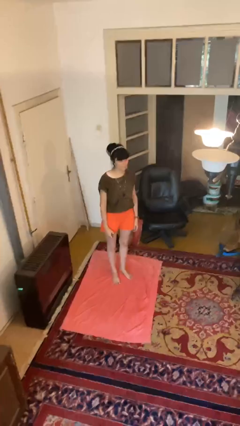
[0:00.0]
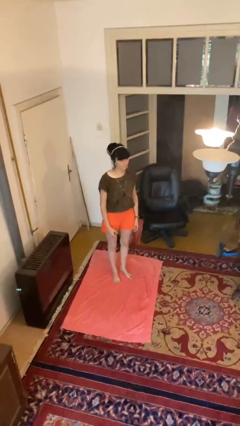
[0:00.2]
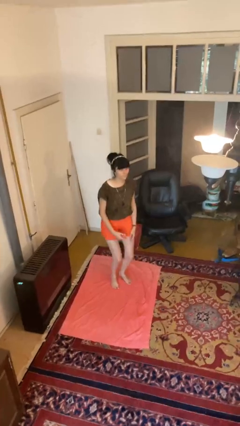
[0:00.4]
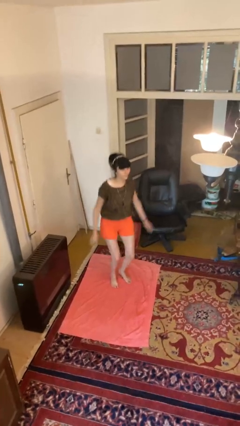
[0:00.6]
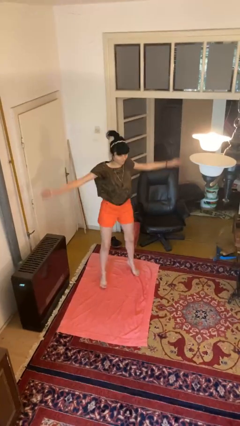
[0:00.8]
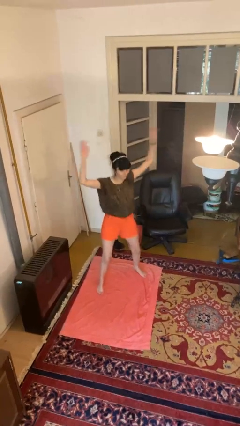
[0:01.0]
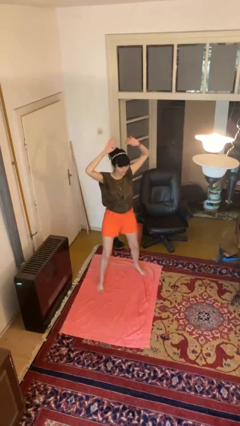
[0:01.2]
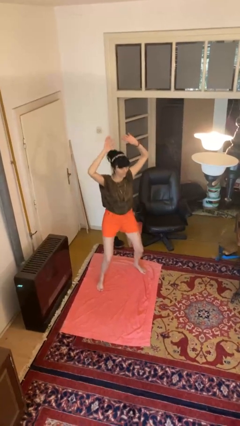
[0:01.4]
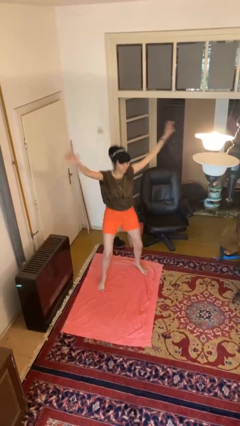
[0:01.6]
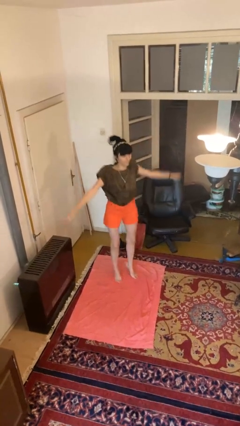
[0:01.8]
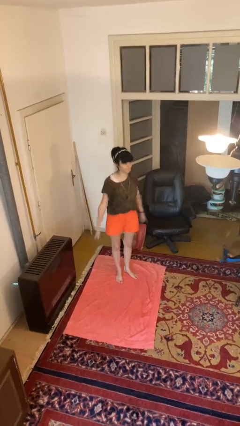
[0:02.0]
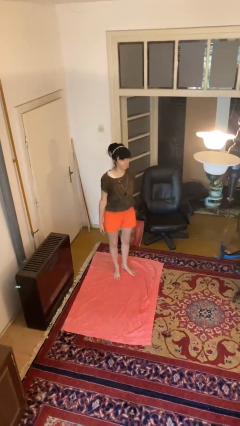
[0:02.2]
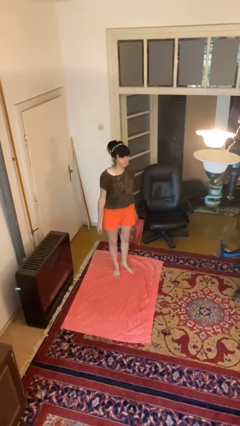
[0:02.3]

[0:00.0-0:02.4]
person exercises with jumping jacks

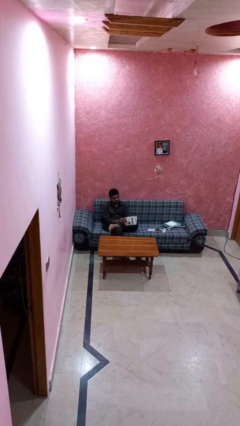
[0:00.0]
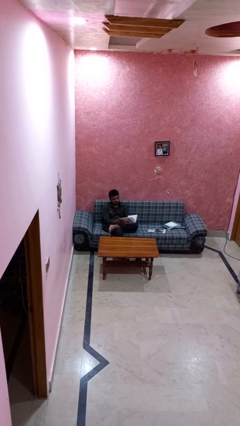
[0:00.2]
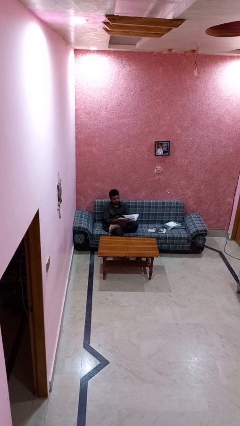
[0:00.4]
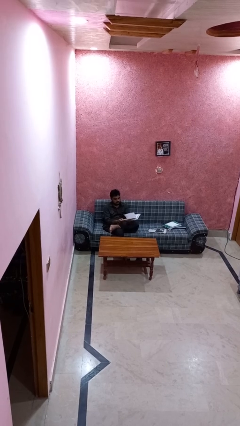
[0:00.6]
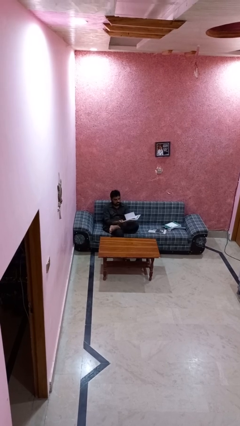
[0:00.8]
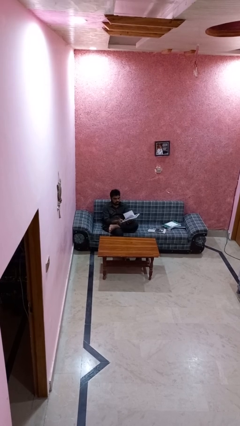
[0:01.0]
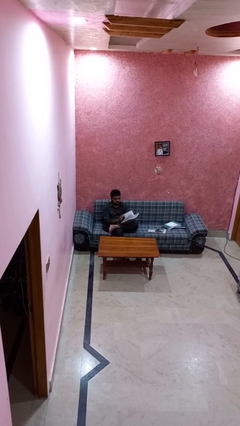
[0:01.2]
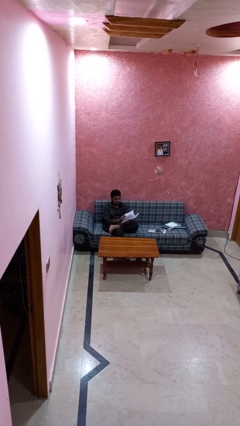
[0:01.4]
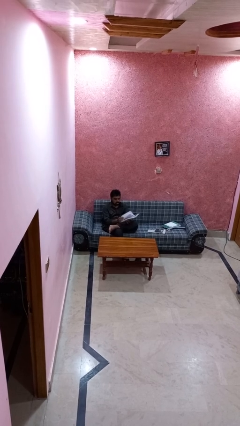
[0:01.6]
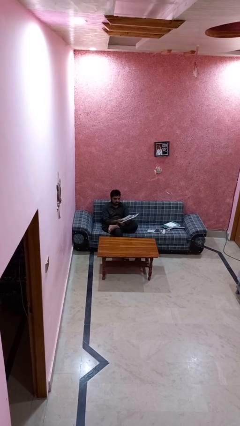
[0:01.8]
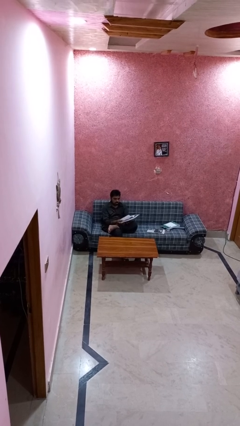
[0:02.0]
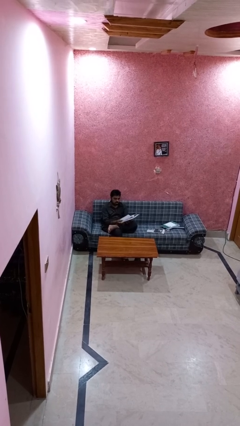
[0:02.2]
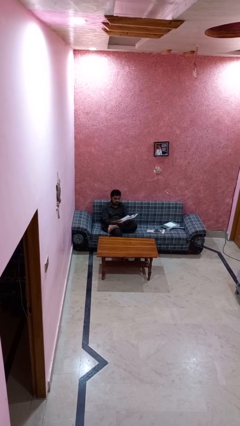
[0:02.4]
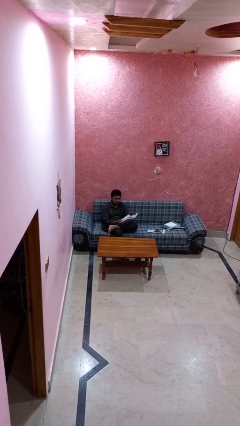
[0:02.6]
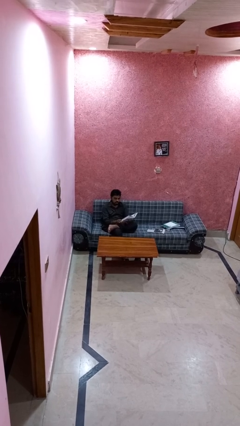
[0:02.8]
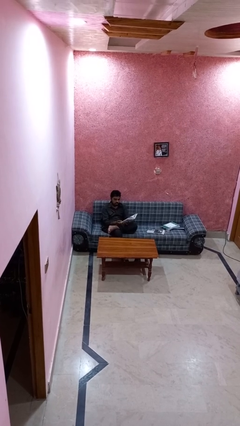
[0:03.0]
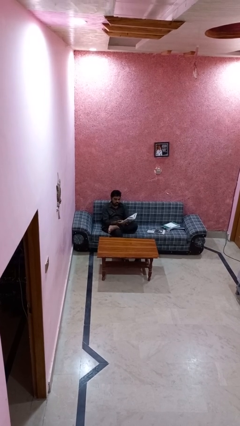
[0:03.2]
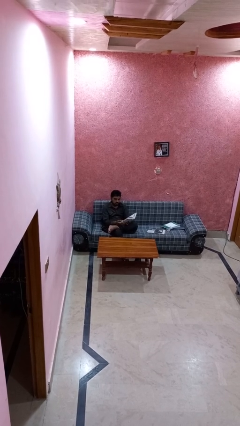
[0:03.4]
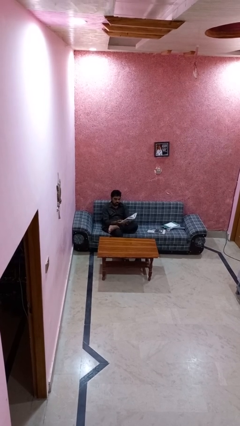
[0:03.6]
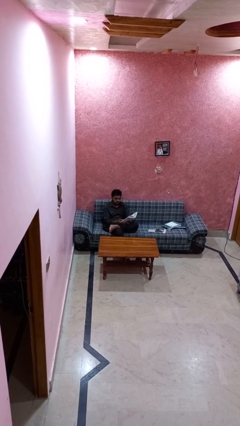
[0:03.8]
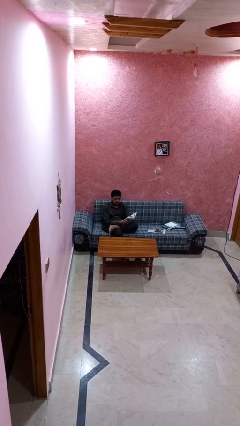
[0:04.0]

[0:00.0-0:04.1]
person reads book

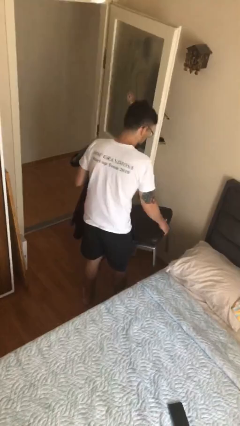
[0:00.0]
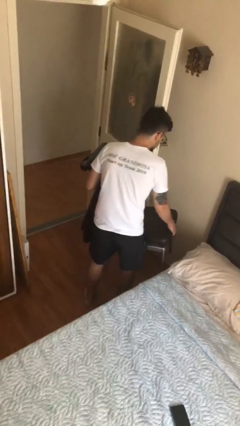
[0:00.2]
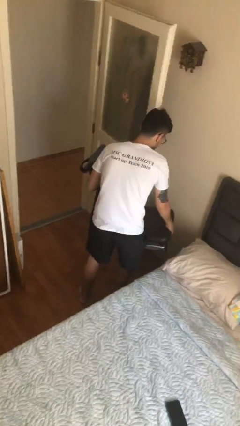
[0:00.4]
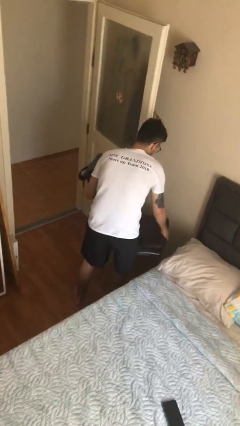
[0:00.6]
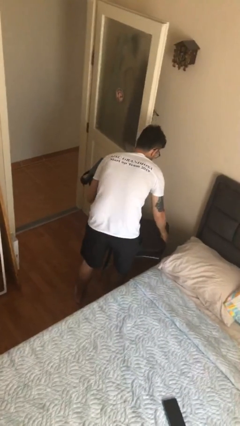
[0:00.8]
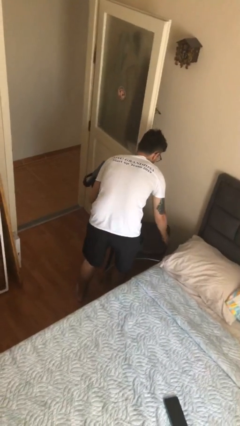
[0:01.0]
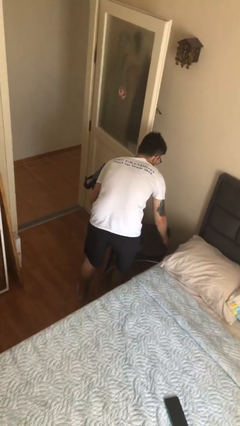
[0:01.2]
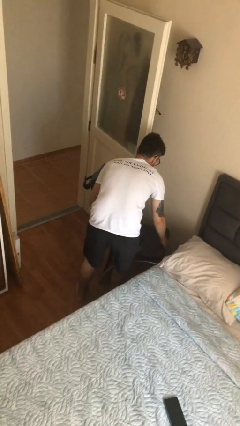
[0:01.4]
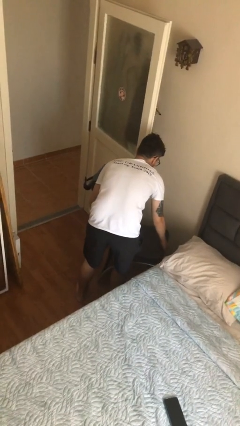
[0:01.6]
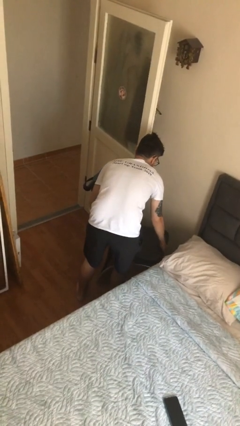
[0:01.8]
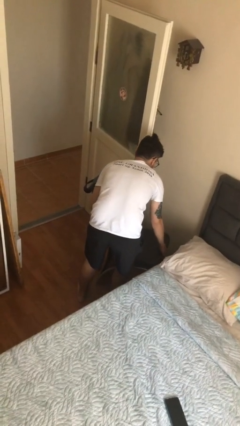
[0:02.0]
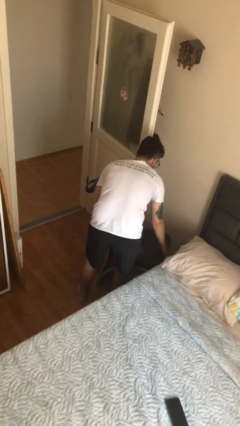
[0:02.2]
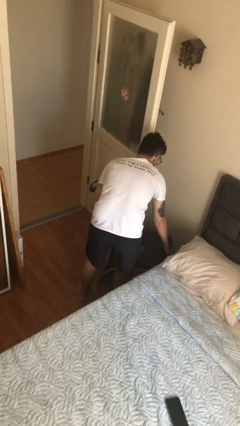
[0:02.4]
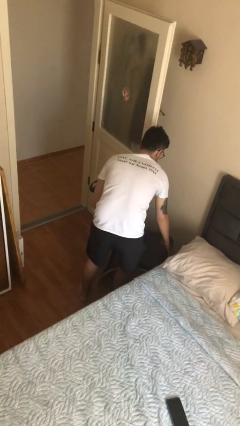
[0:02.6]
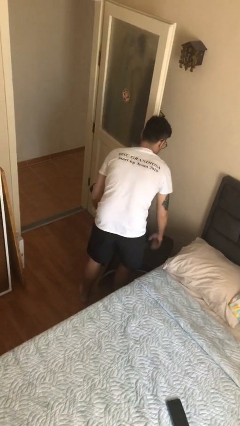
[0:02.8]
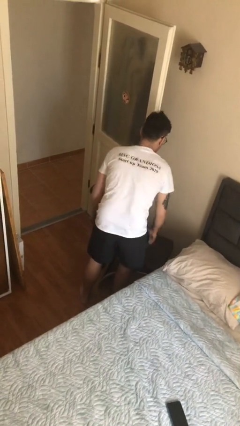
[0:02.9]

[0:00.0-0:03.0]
person puts down object on floor

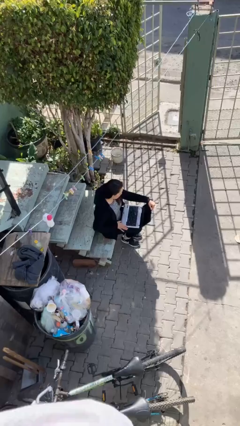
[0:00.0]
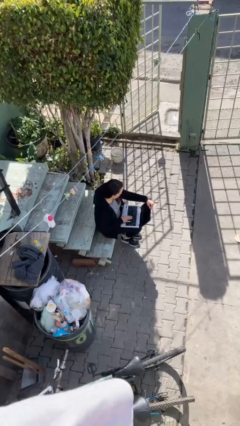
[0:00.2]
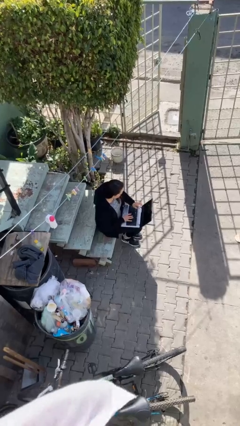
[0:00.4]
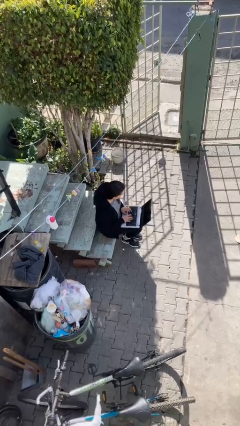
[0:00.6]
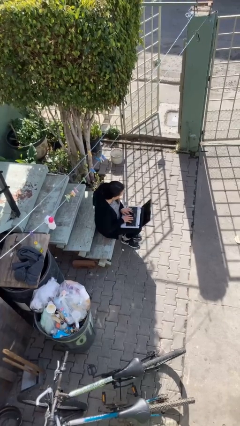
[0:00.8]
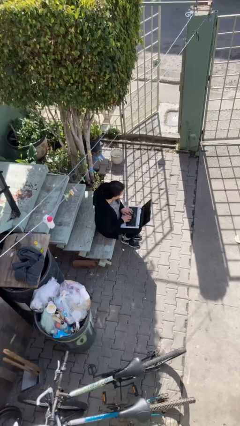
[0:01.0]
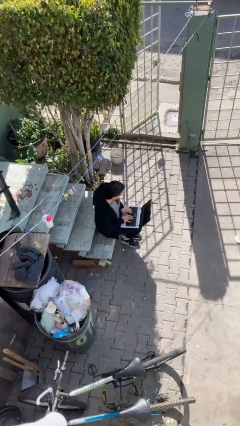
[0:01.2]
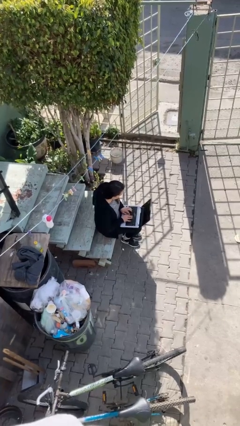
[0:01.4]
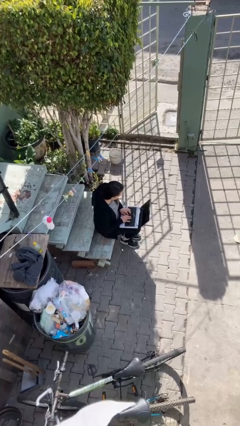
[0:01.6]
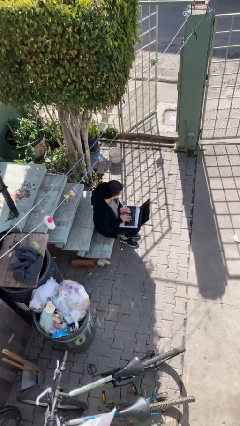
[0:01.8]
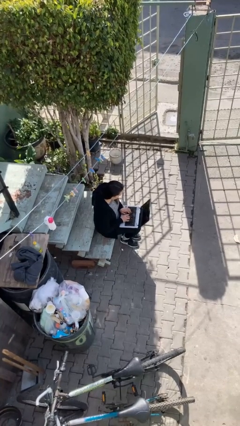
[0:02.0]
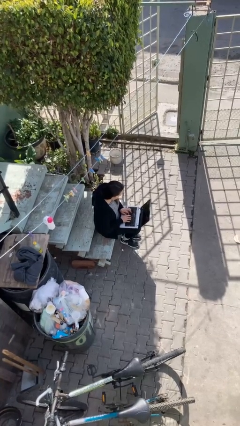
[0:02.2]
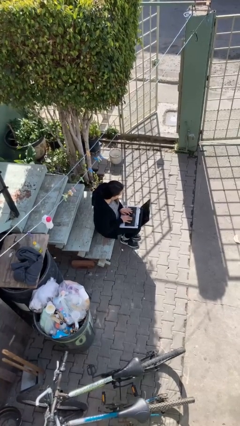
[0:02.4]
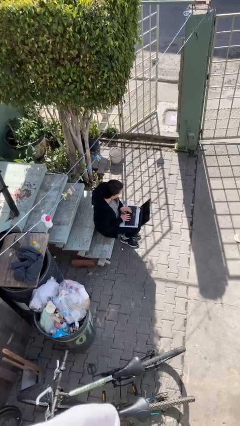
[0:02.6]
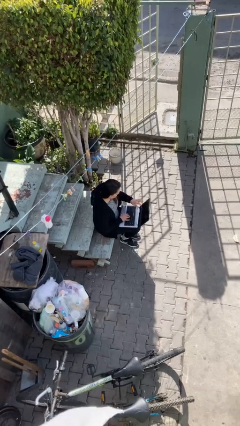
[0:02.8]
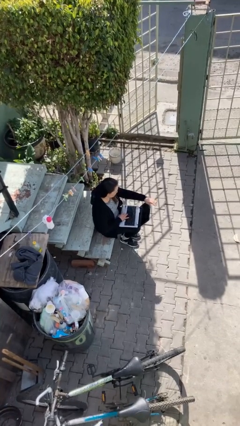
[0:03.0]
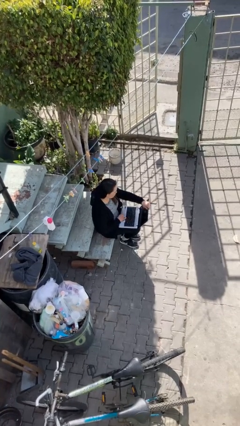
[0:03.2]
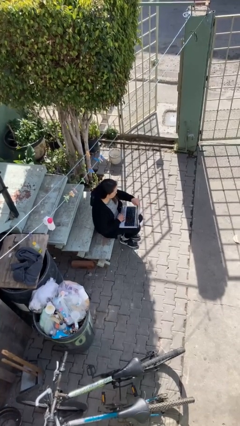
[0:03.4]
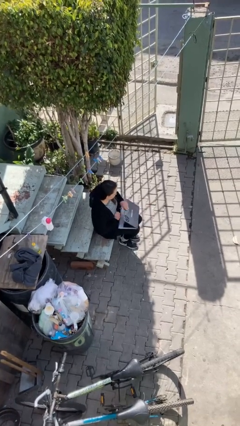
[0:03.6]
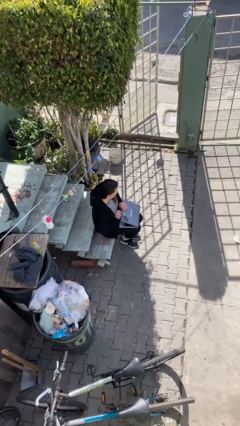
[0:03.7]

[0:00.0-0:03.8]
person interacts with laptop

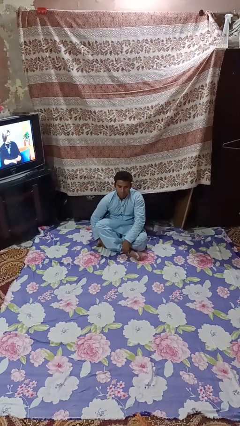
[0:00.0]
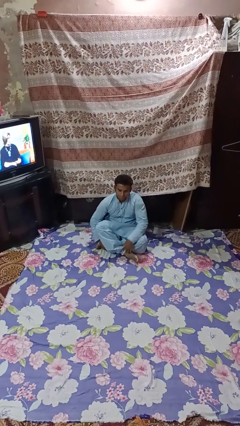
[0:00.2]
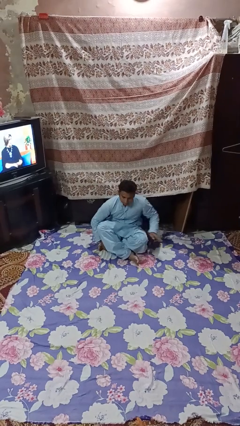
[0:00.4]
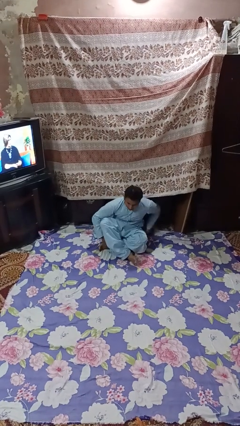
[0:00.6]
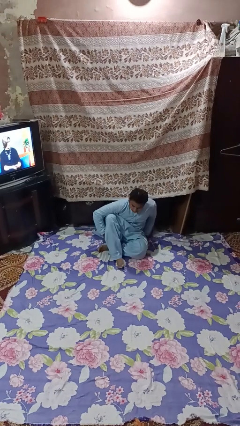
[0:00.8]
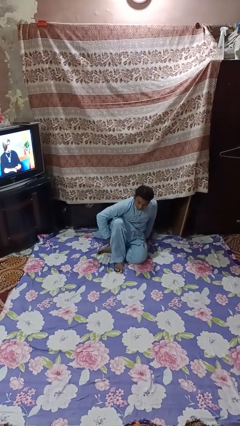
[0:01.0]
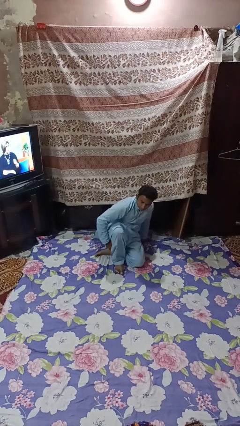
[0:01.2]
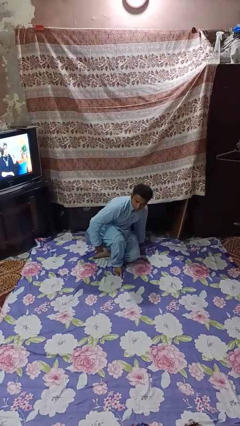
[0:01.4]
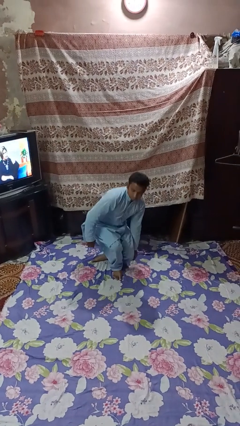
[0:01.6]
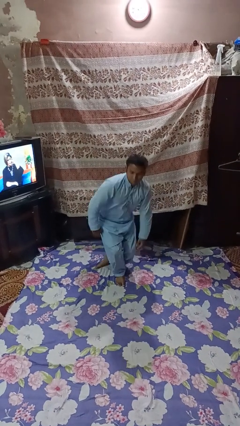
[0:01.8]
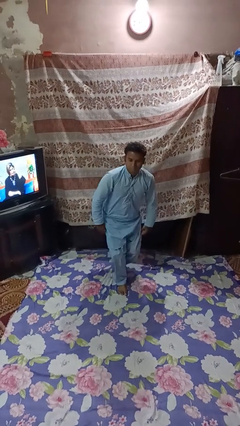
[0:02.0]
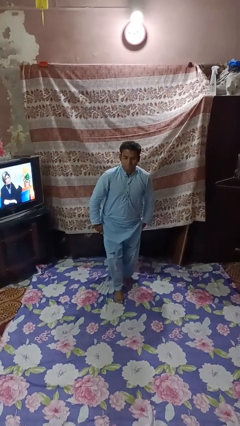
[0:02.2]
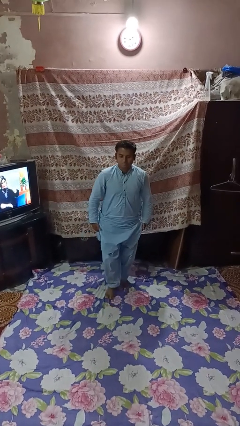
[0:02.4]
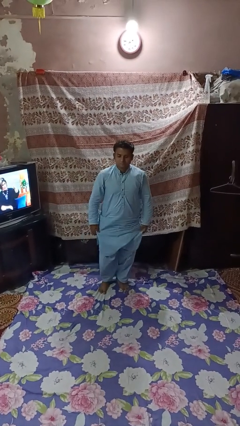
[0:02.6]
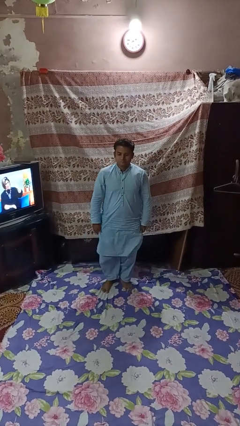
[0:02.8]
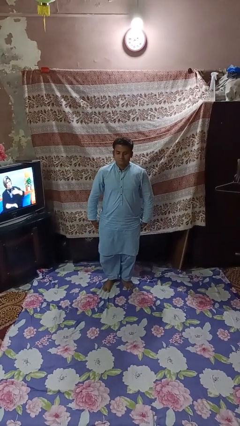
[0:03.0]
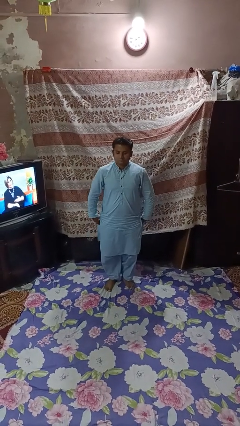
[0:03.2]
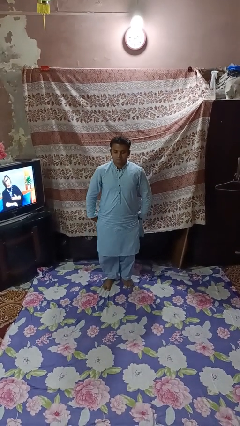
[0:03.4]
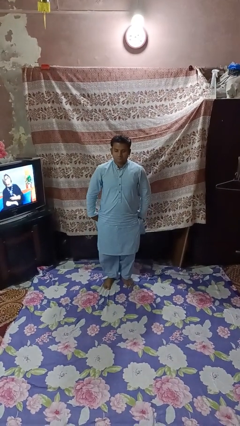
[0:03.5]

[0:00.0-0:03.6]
person stands up from floor

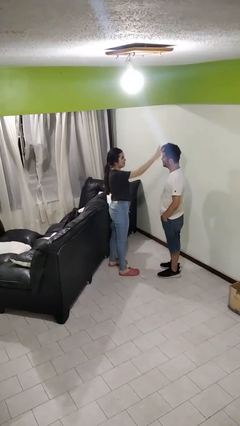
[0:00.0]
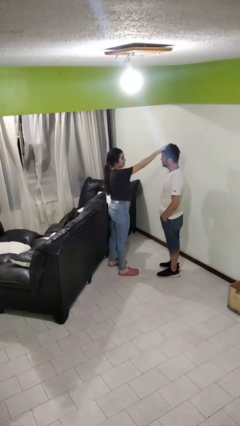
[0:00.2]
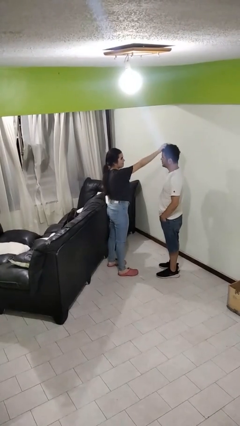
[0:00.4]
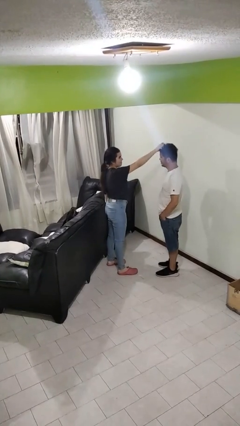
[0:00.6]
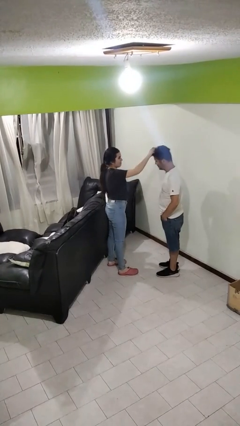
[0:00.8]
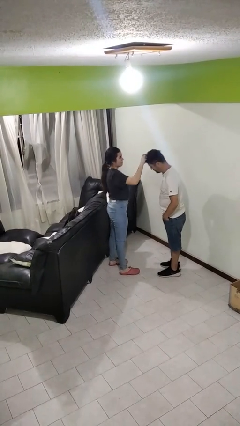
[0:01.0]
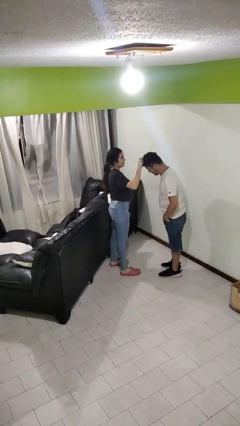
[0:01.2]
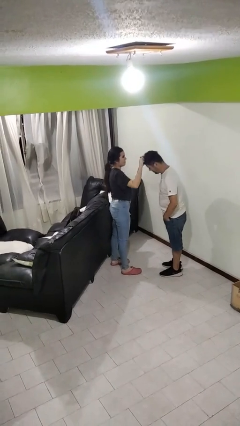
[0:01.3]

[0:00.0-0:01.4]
person grabs person by hair
